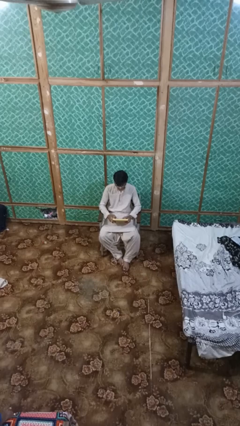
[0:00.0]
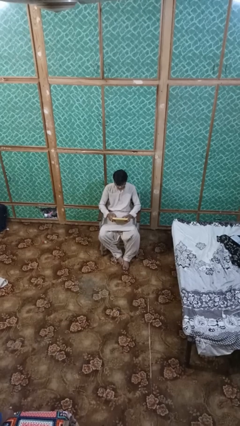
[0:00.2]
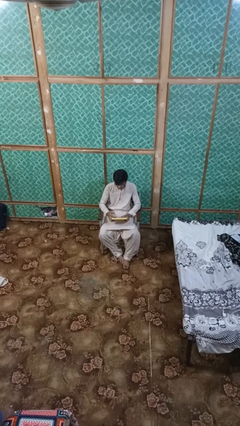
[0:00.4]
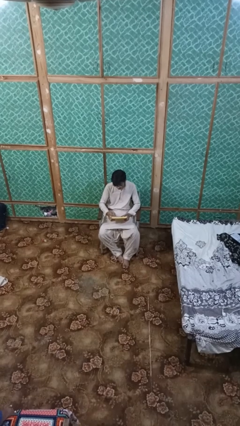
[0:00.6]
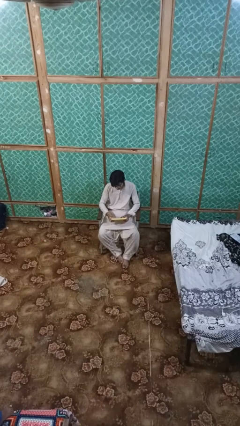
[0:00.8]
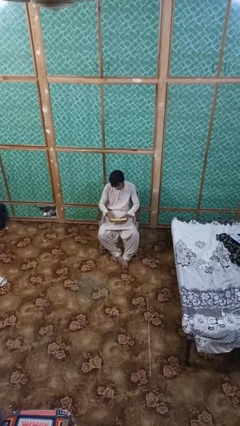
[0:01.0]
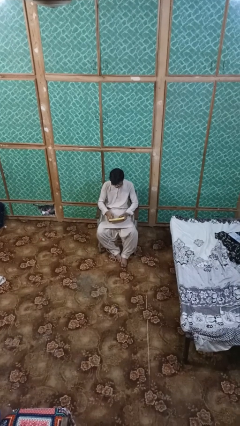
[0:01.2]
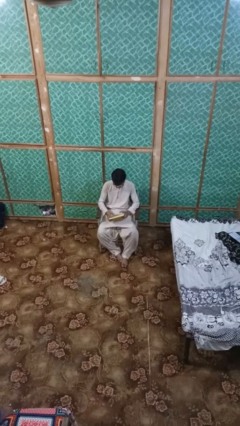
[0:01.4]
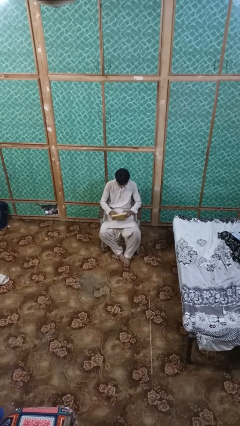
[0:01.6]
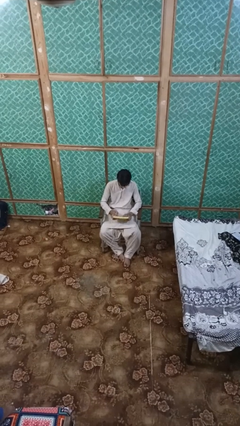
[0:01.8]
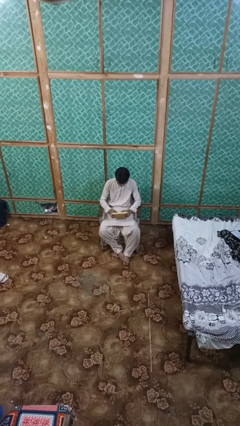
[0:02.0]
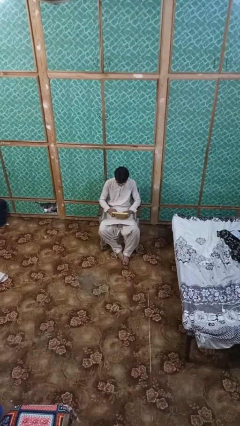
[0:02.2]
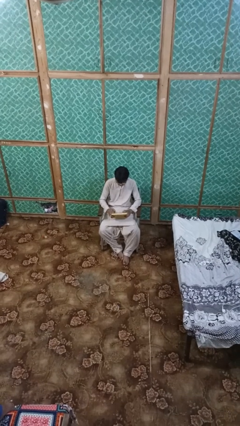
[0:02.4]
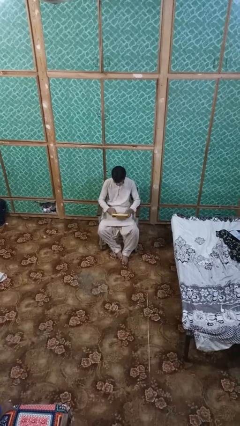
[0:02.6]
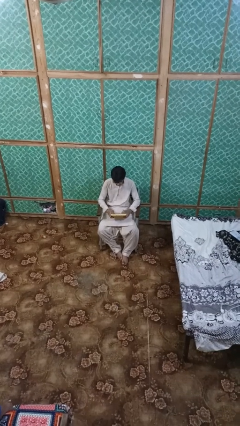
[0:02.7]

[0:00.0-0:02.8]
person interacts with handheld game

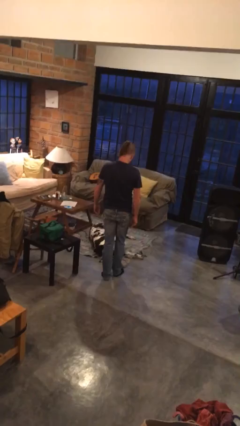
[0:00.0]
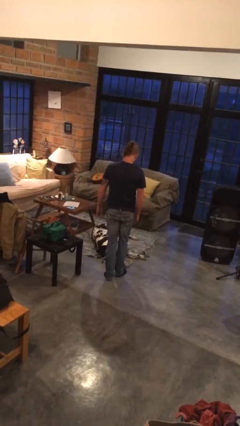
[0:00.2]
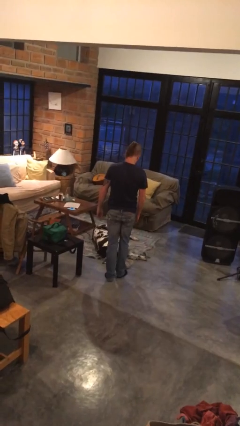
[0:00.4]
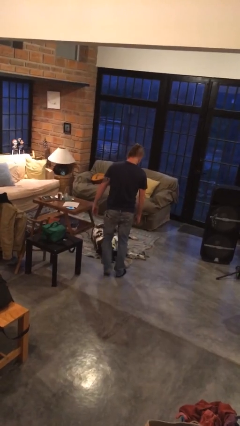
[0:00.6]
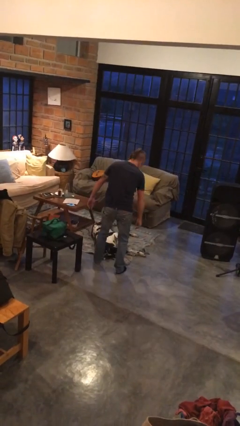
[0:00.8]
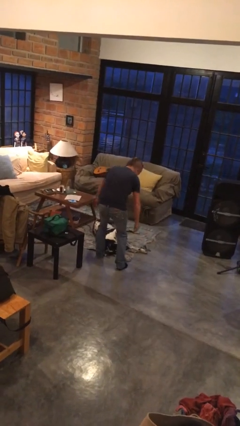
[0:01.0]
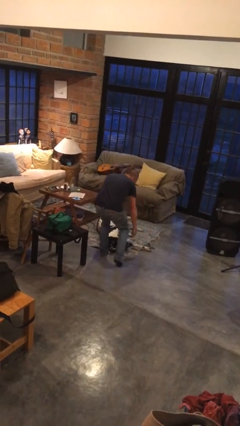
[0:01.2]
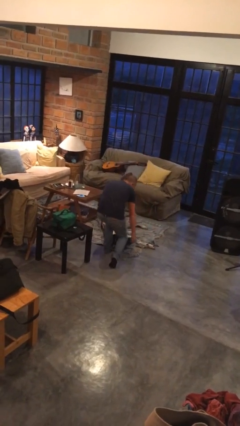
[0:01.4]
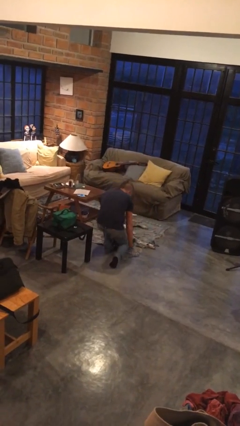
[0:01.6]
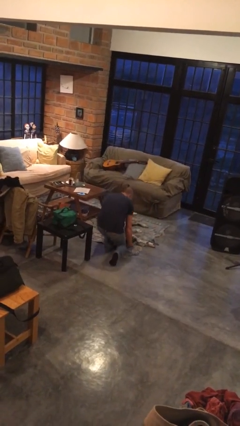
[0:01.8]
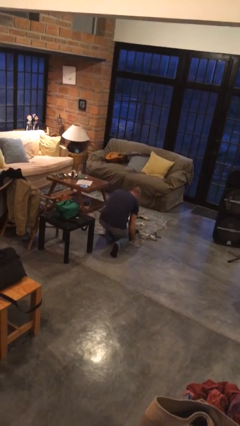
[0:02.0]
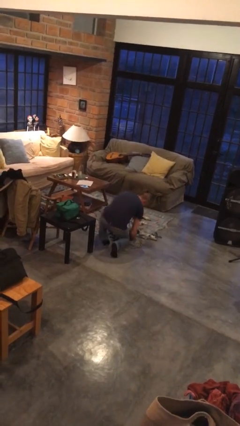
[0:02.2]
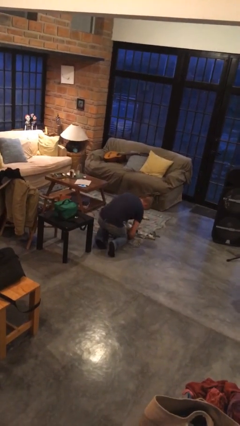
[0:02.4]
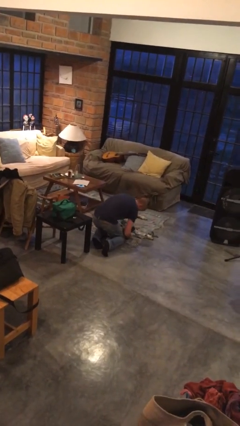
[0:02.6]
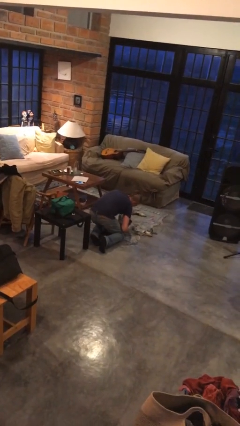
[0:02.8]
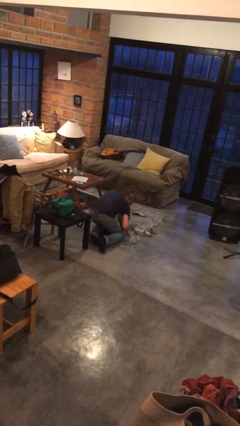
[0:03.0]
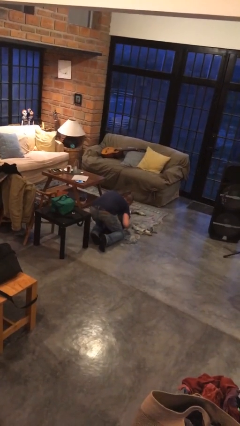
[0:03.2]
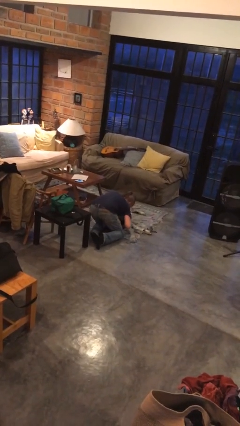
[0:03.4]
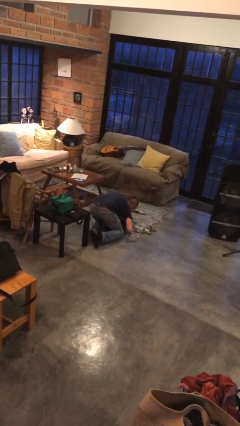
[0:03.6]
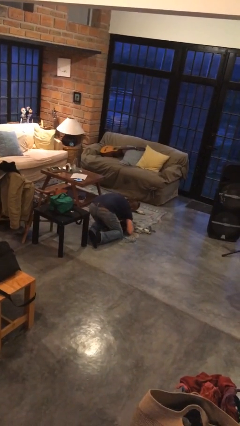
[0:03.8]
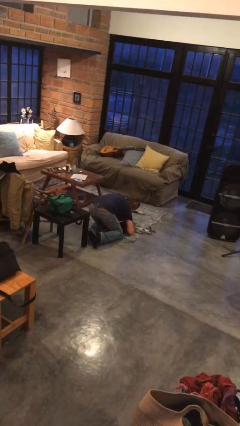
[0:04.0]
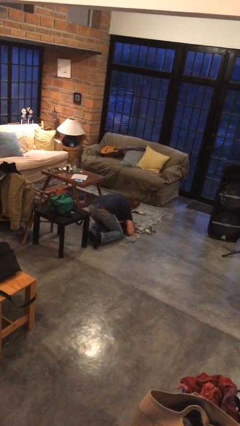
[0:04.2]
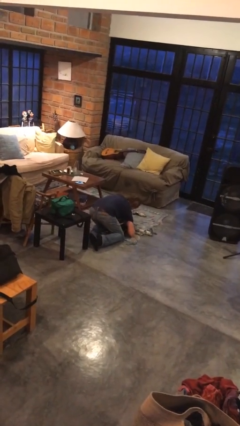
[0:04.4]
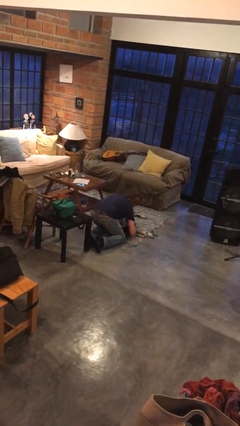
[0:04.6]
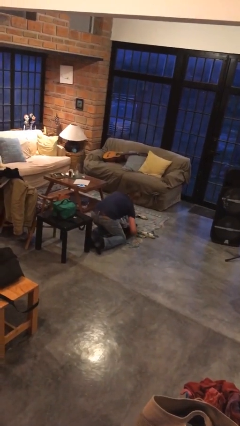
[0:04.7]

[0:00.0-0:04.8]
person hugs dog

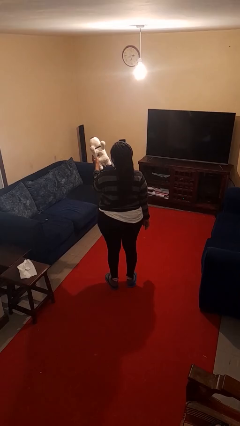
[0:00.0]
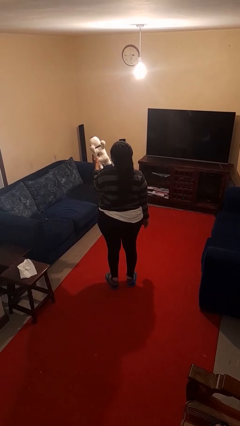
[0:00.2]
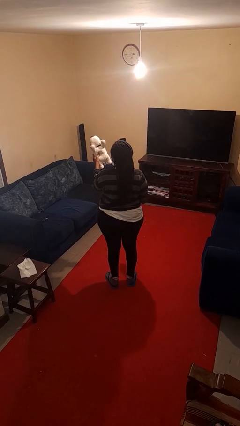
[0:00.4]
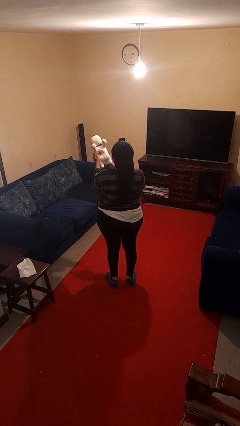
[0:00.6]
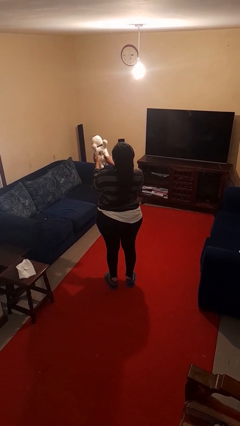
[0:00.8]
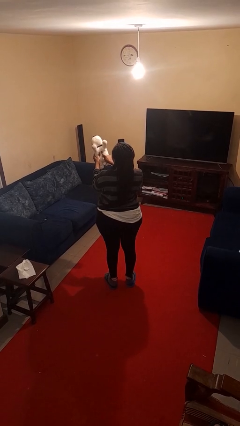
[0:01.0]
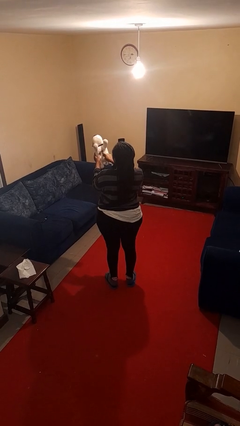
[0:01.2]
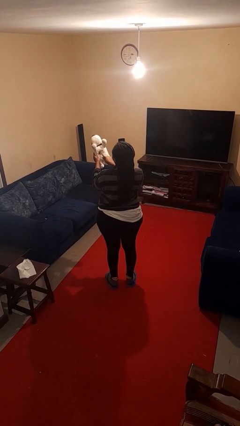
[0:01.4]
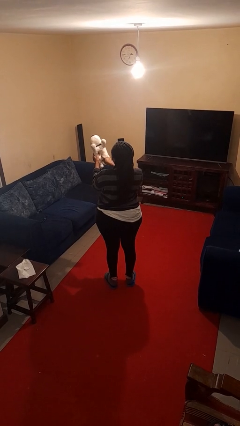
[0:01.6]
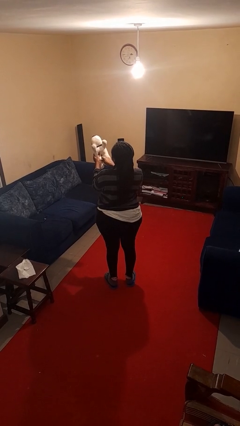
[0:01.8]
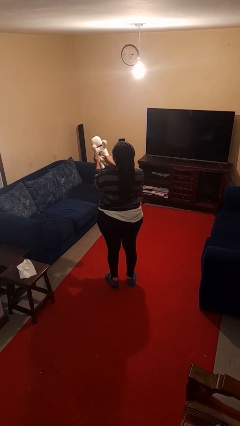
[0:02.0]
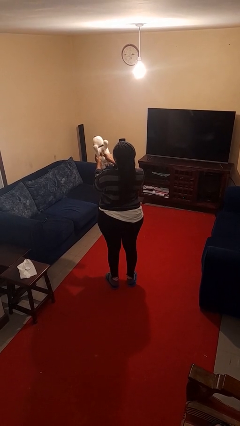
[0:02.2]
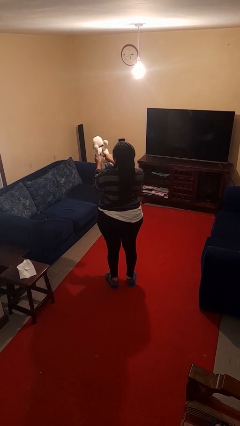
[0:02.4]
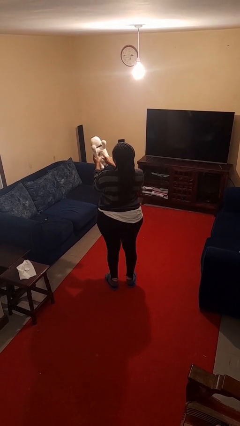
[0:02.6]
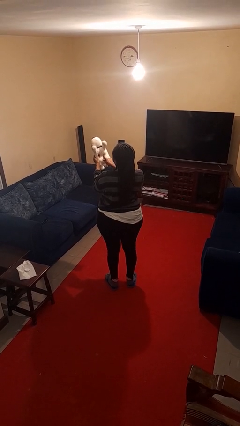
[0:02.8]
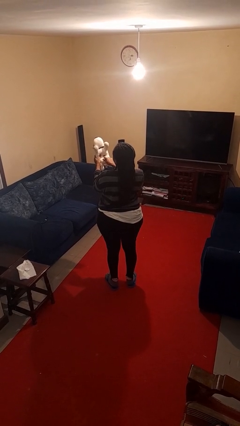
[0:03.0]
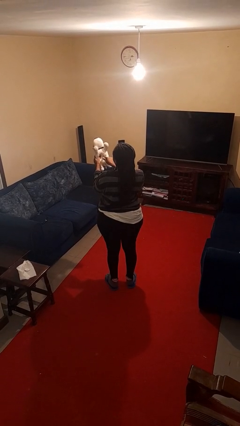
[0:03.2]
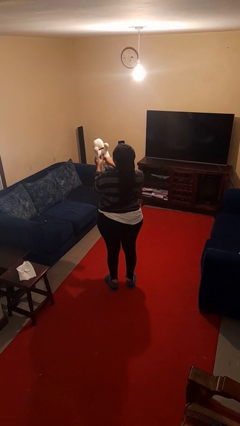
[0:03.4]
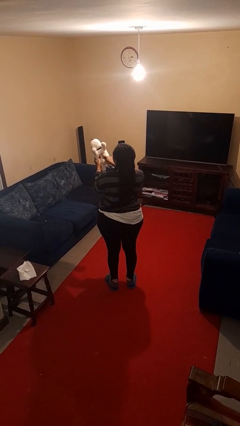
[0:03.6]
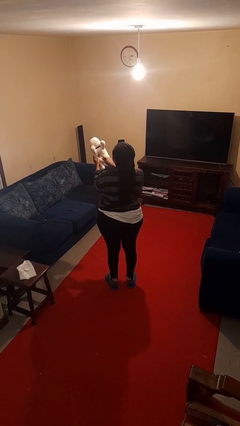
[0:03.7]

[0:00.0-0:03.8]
person taps object with finger

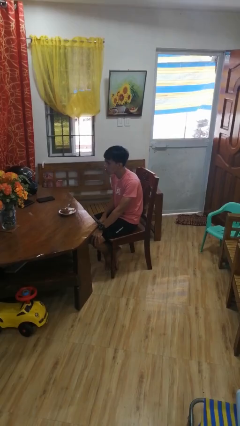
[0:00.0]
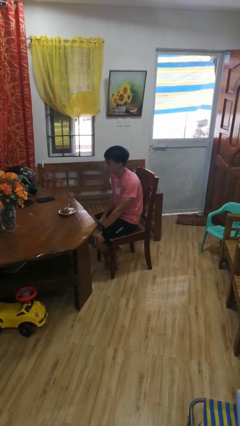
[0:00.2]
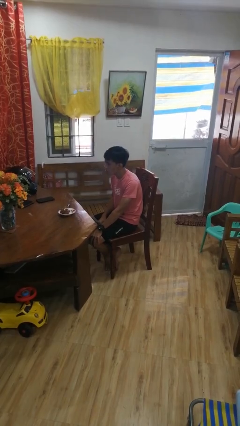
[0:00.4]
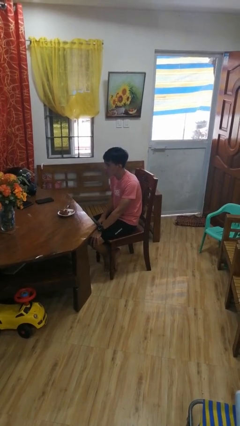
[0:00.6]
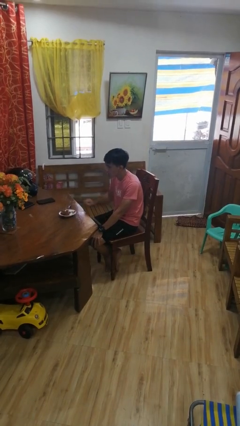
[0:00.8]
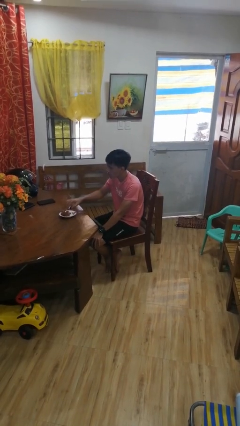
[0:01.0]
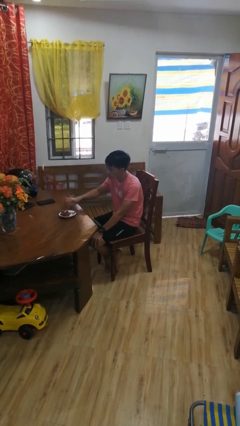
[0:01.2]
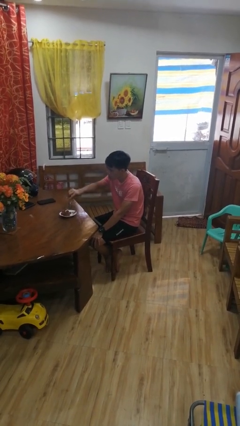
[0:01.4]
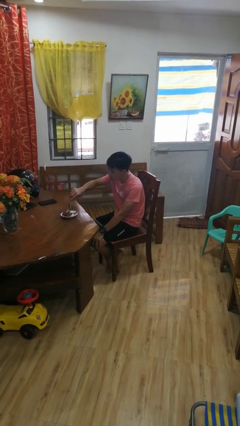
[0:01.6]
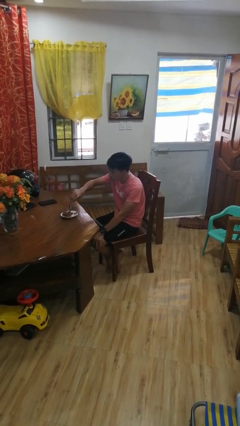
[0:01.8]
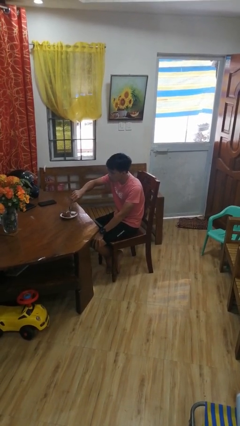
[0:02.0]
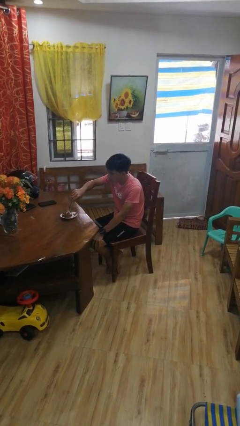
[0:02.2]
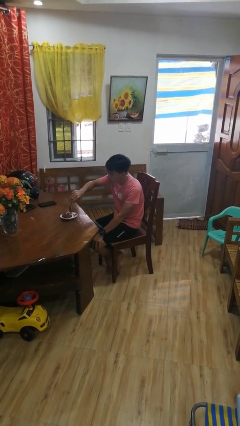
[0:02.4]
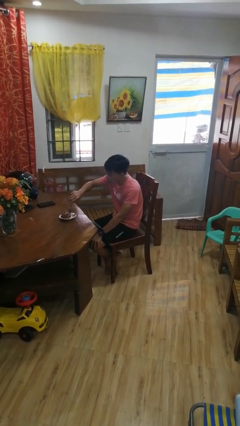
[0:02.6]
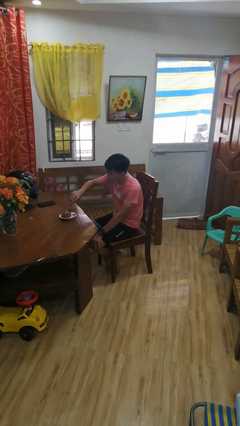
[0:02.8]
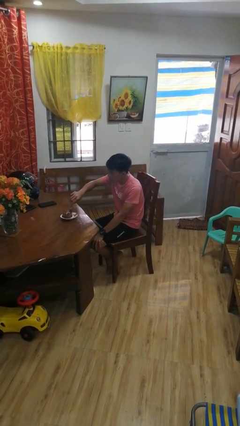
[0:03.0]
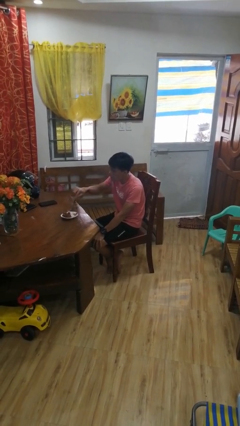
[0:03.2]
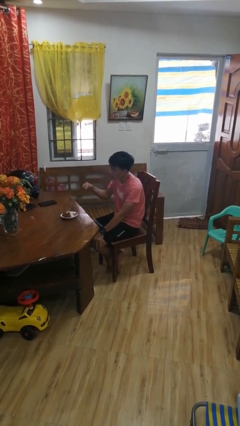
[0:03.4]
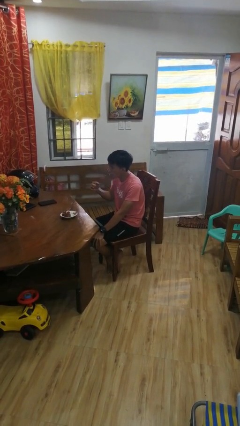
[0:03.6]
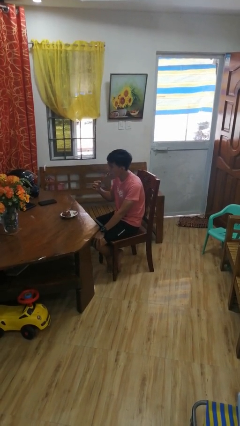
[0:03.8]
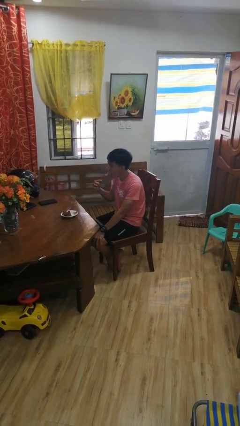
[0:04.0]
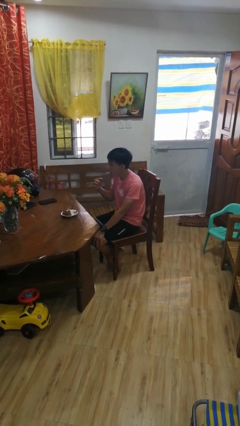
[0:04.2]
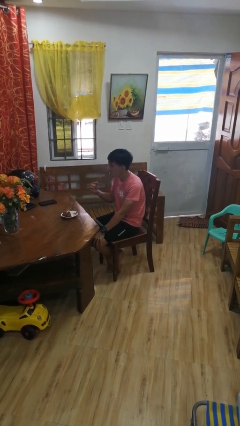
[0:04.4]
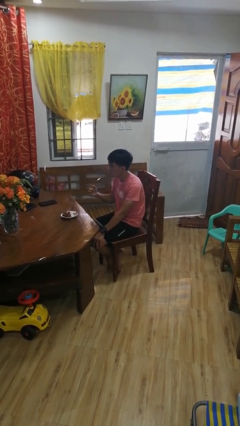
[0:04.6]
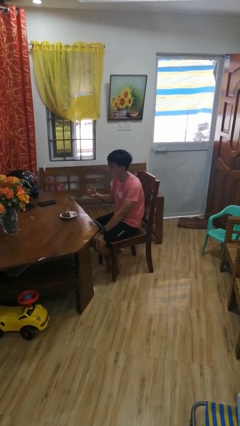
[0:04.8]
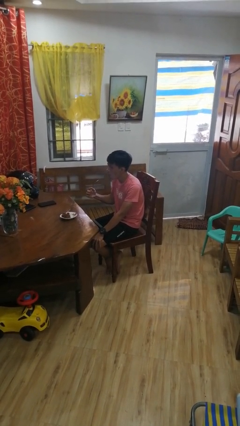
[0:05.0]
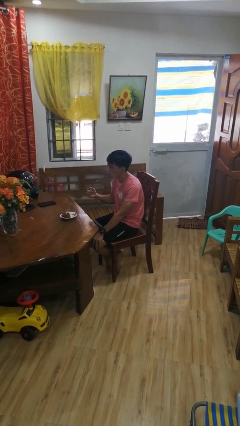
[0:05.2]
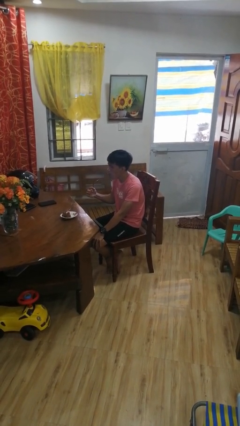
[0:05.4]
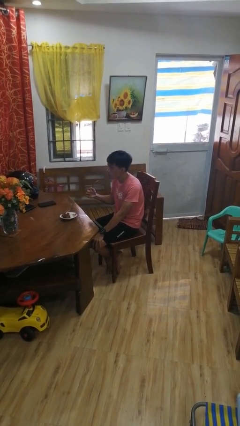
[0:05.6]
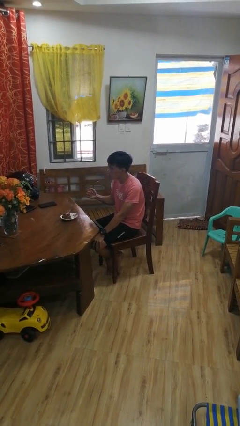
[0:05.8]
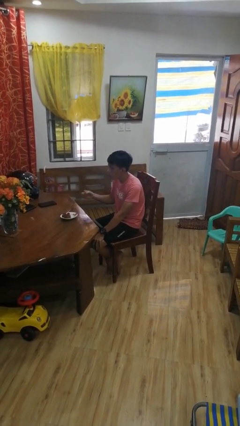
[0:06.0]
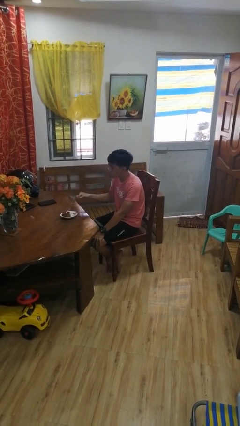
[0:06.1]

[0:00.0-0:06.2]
person eats with utensil

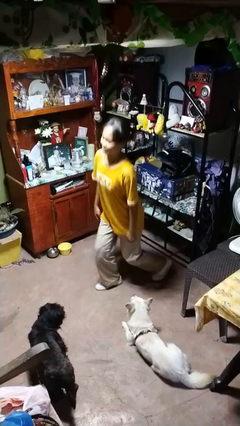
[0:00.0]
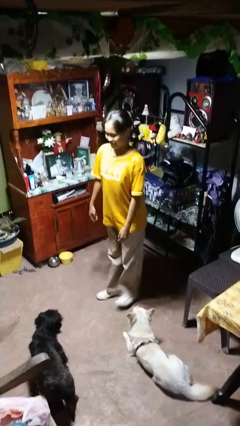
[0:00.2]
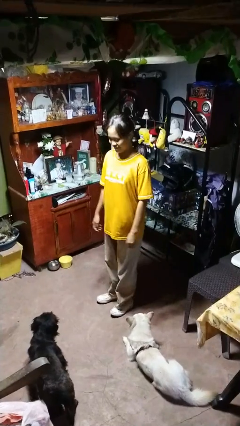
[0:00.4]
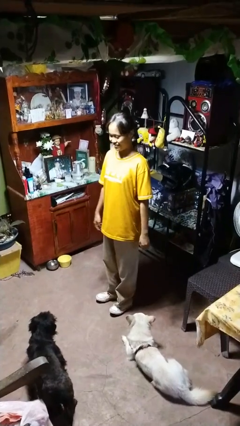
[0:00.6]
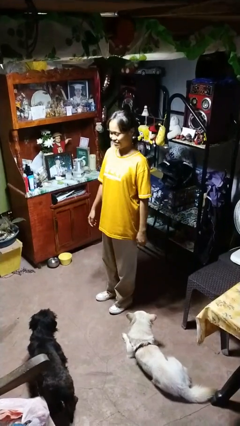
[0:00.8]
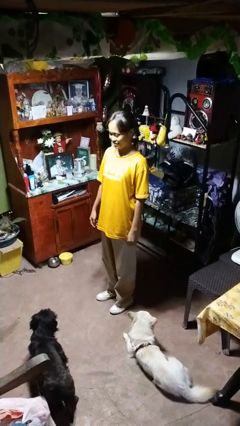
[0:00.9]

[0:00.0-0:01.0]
person stands up from floor
